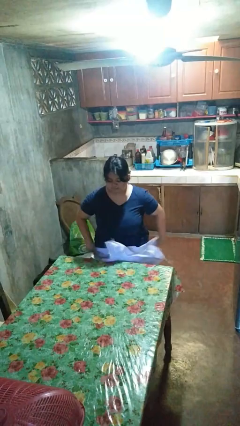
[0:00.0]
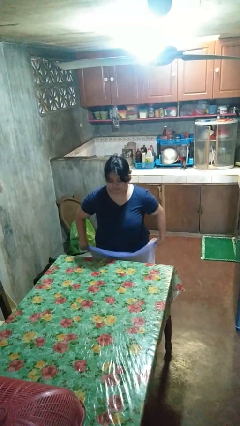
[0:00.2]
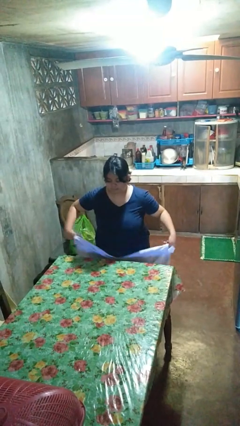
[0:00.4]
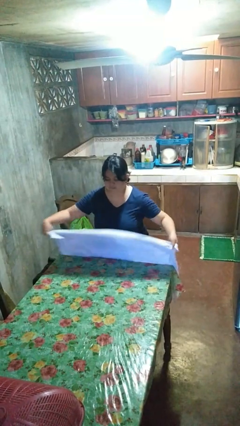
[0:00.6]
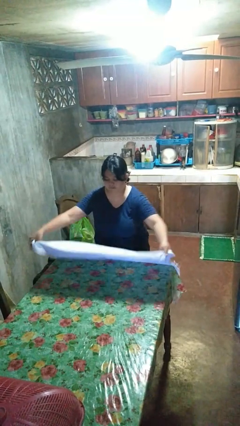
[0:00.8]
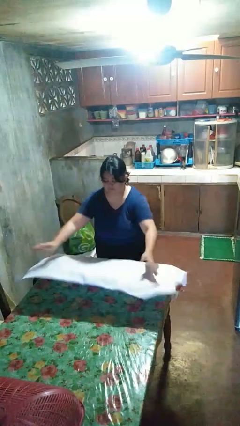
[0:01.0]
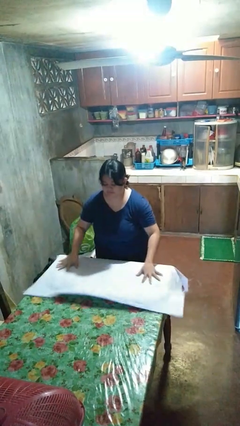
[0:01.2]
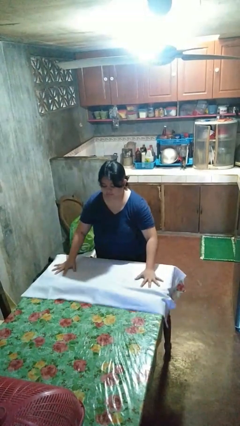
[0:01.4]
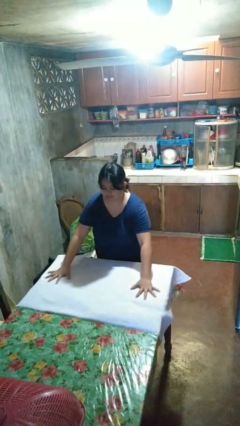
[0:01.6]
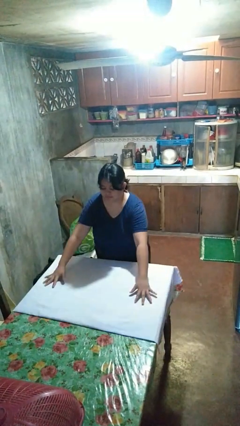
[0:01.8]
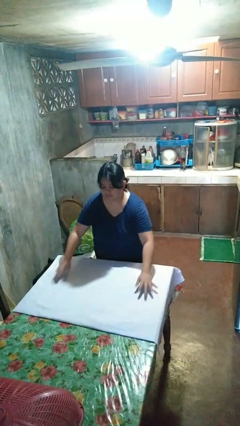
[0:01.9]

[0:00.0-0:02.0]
person spreads tablecloth

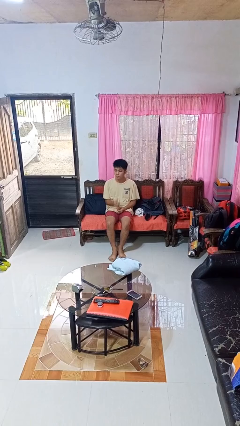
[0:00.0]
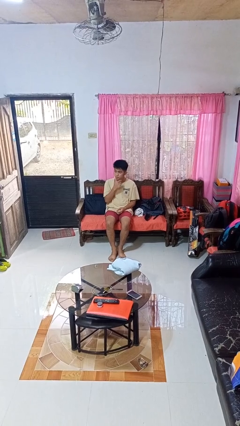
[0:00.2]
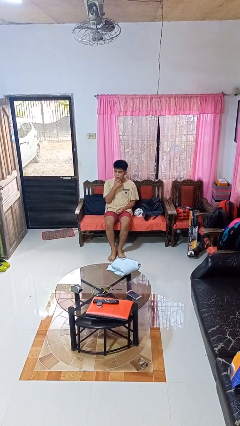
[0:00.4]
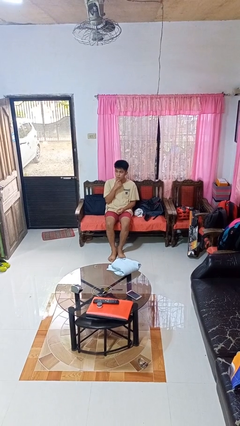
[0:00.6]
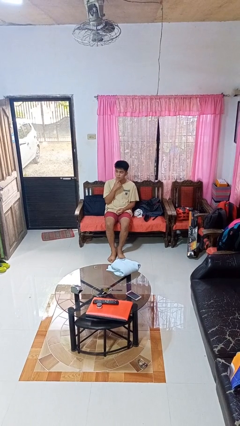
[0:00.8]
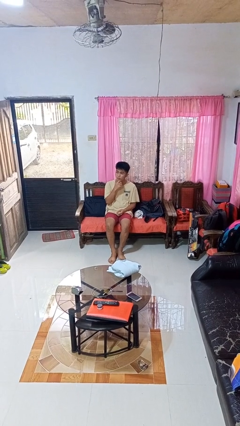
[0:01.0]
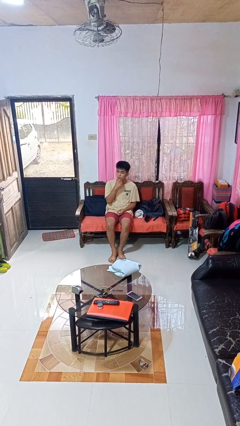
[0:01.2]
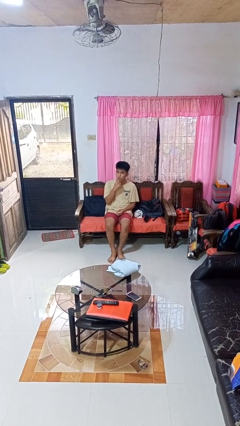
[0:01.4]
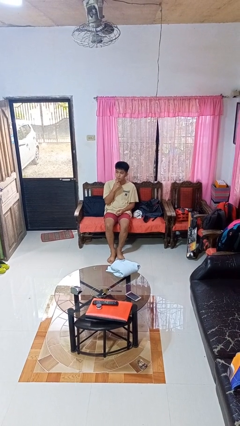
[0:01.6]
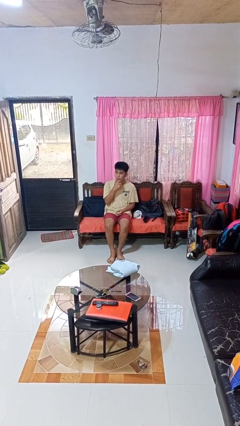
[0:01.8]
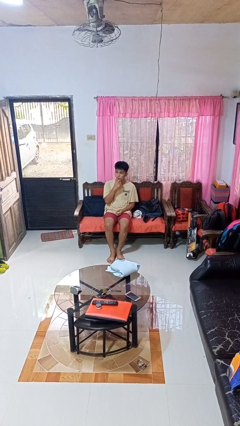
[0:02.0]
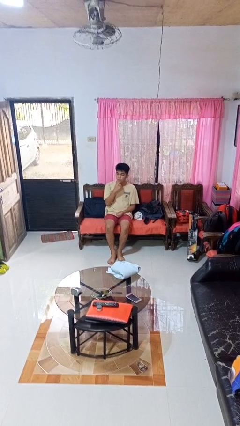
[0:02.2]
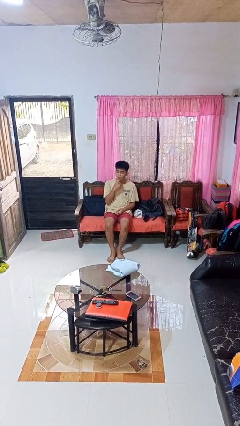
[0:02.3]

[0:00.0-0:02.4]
person strokes chin

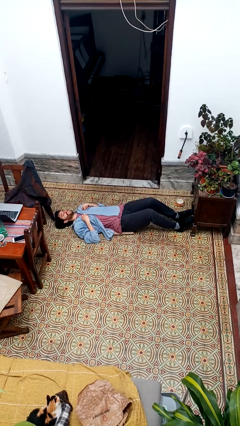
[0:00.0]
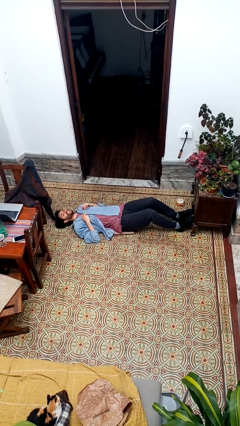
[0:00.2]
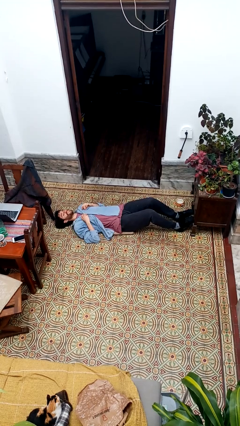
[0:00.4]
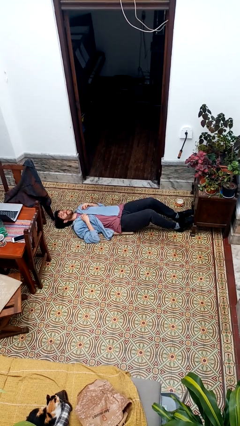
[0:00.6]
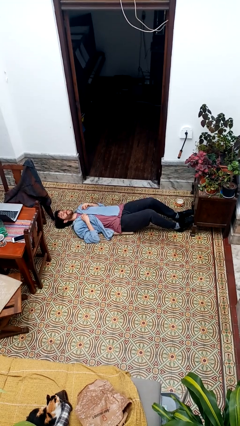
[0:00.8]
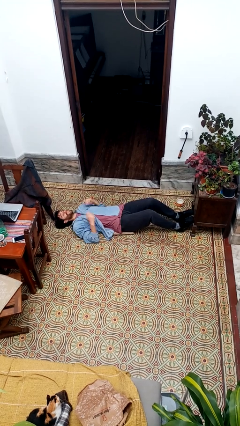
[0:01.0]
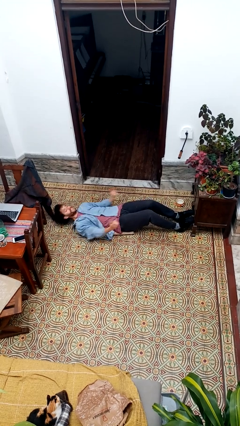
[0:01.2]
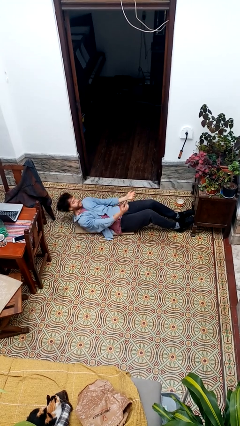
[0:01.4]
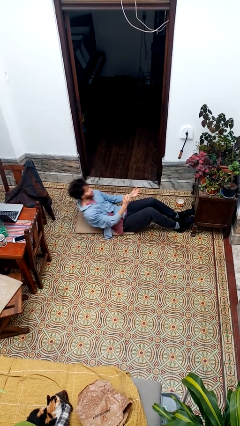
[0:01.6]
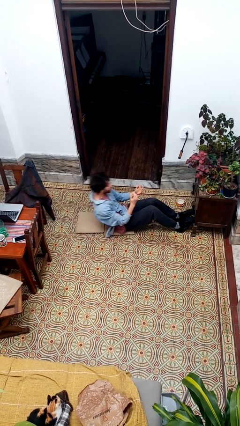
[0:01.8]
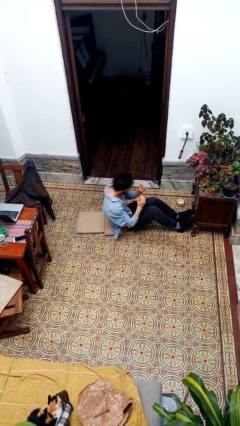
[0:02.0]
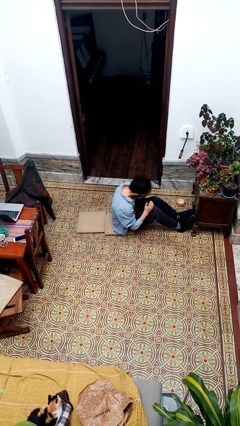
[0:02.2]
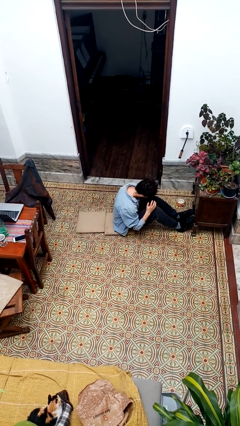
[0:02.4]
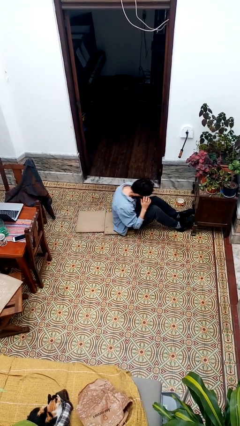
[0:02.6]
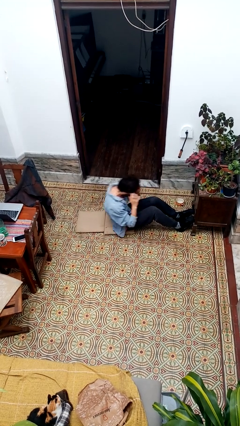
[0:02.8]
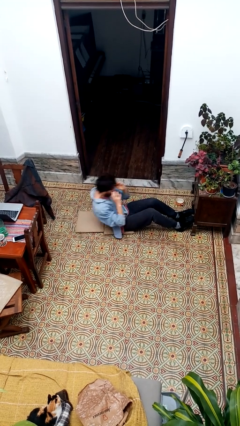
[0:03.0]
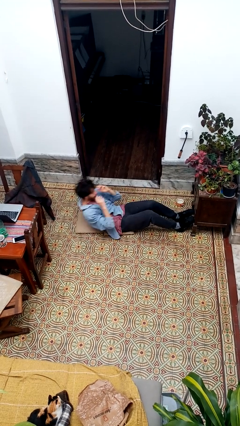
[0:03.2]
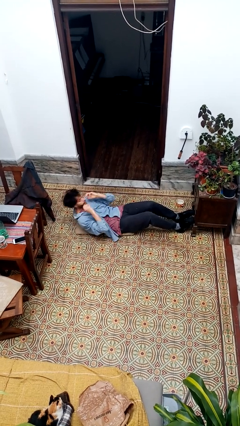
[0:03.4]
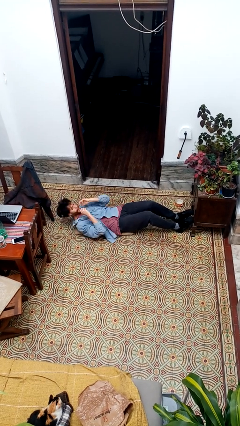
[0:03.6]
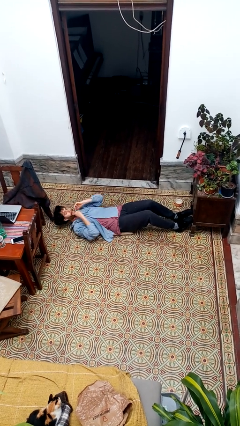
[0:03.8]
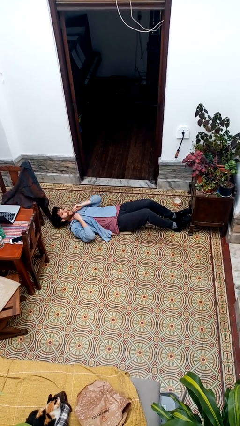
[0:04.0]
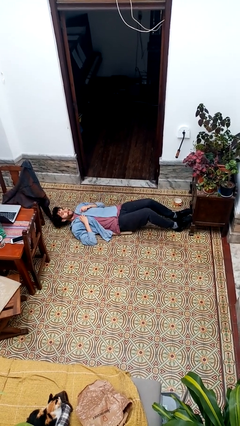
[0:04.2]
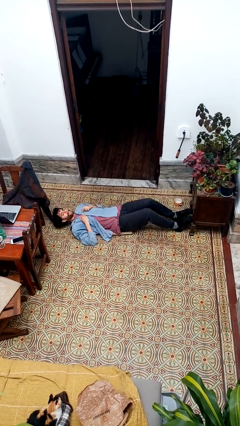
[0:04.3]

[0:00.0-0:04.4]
person exercises with situp

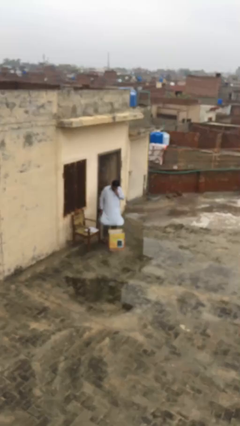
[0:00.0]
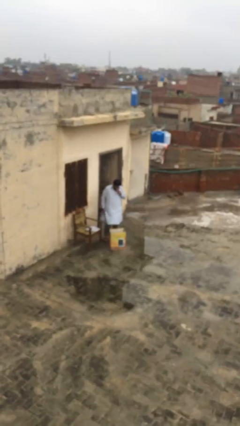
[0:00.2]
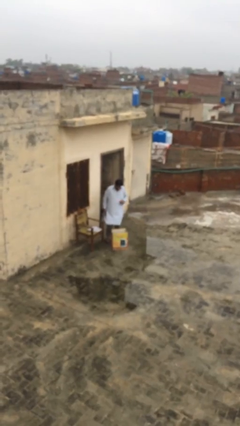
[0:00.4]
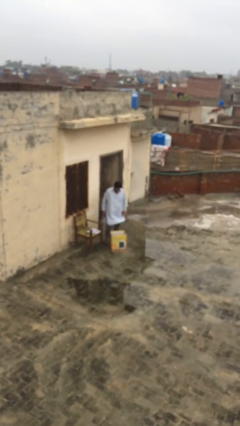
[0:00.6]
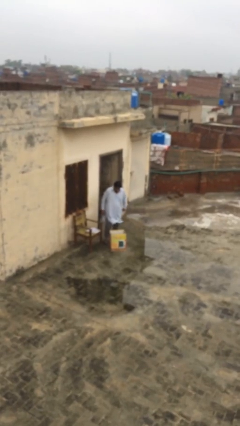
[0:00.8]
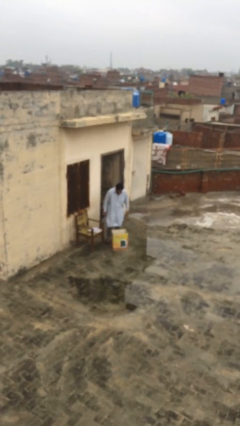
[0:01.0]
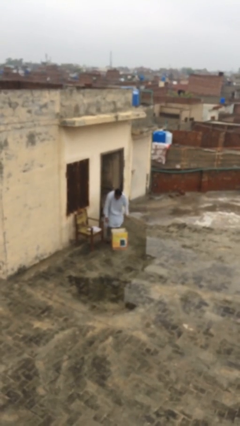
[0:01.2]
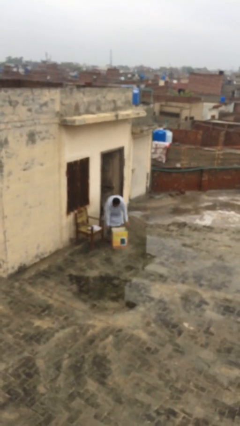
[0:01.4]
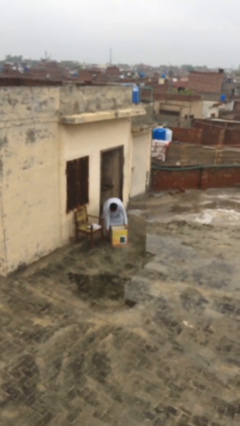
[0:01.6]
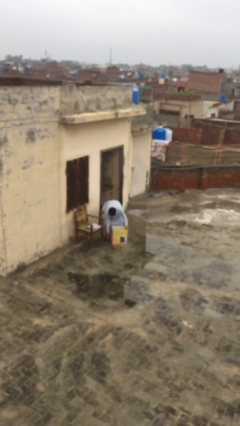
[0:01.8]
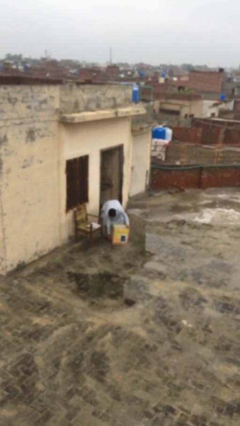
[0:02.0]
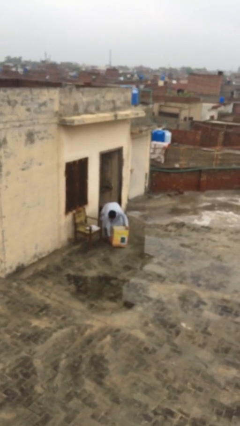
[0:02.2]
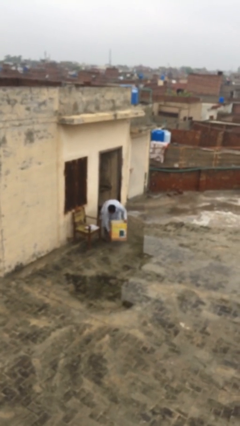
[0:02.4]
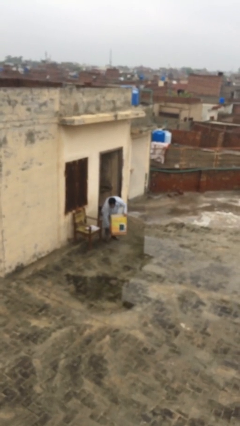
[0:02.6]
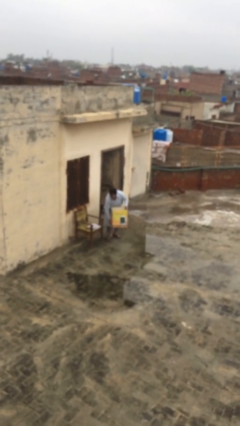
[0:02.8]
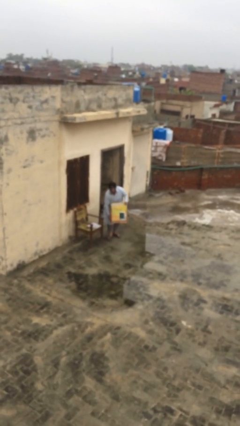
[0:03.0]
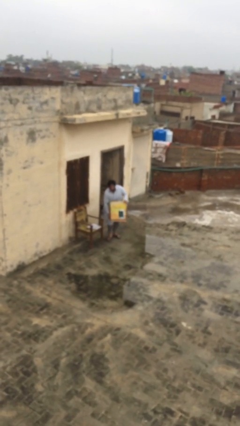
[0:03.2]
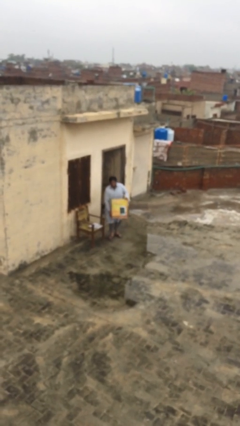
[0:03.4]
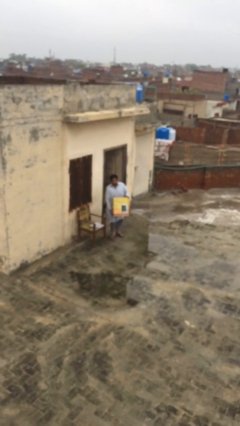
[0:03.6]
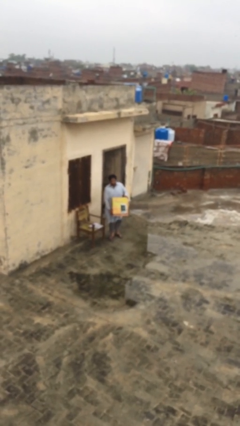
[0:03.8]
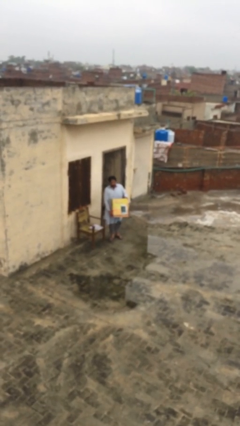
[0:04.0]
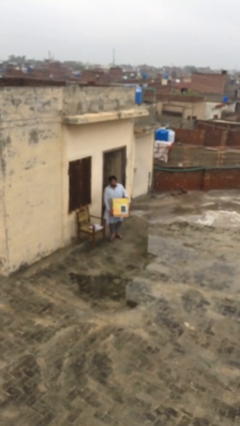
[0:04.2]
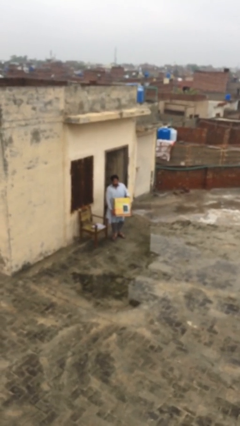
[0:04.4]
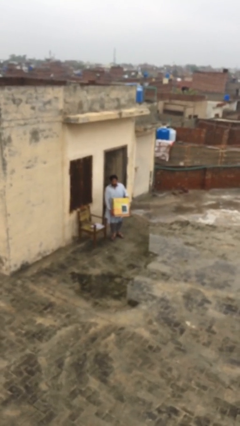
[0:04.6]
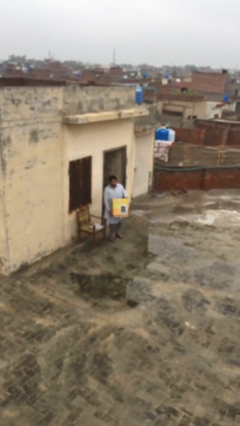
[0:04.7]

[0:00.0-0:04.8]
person picks up object from floor

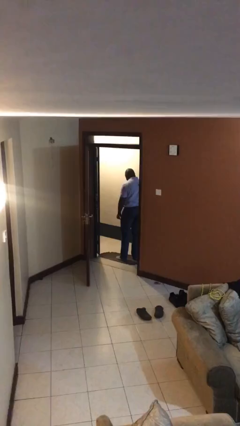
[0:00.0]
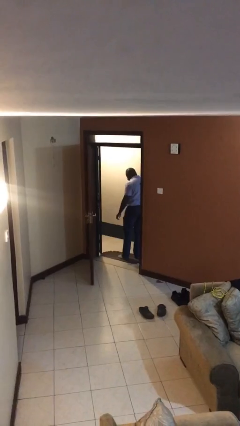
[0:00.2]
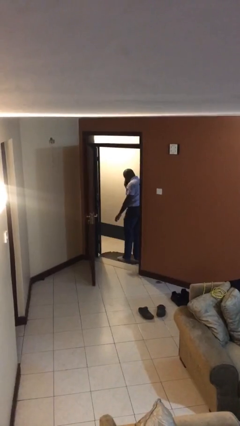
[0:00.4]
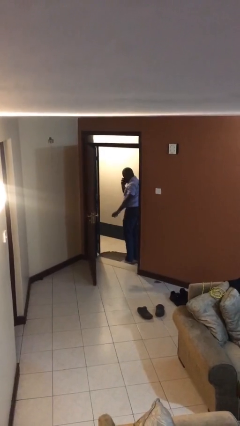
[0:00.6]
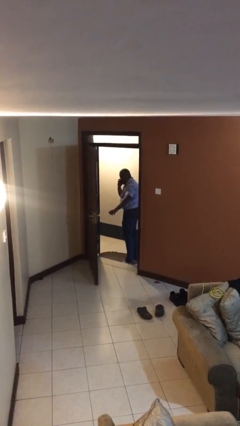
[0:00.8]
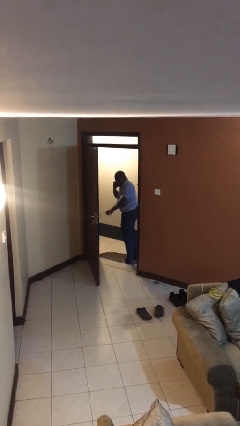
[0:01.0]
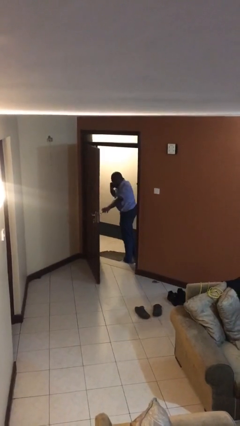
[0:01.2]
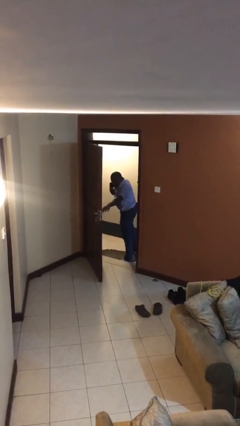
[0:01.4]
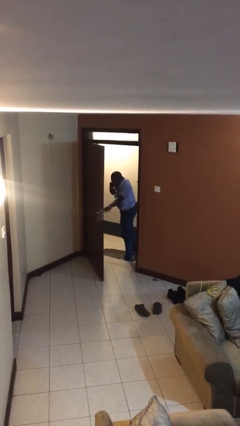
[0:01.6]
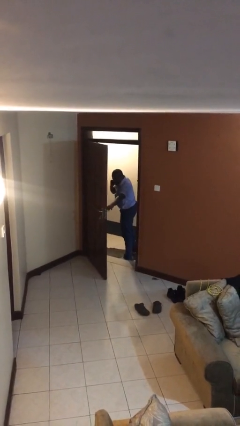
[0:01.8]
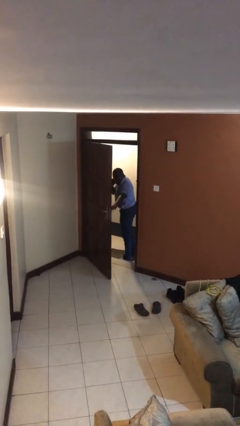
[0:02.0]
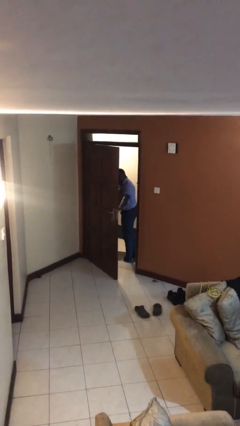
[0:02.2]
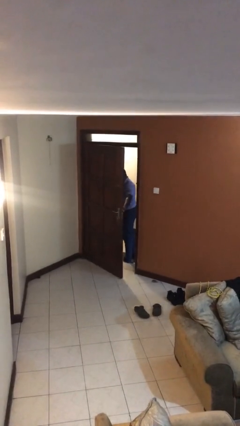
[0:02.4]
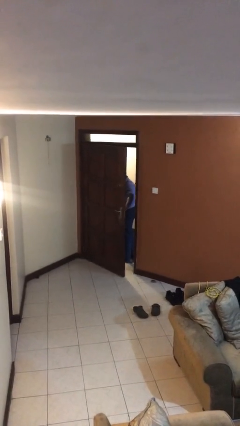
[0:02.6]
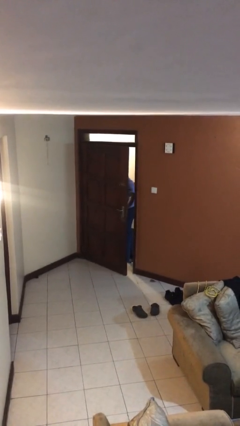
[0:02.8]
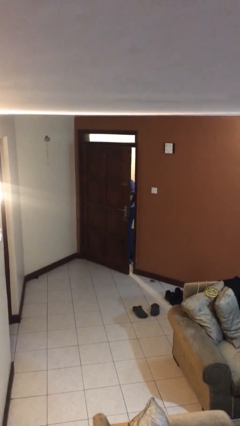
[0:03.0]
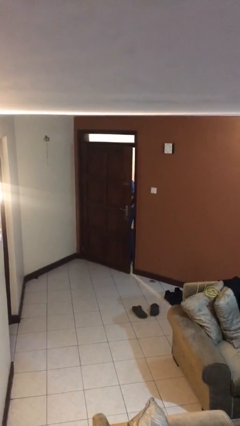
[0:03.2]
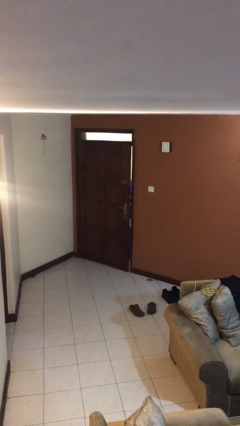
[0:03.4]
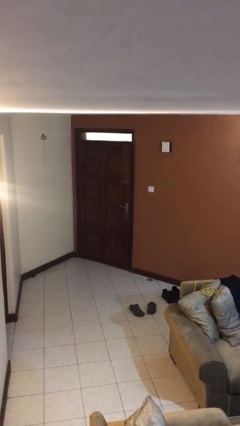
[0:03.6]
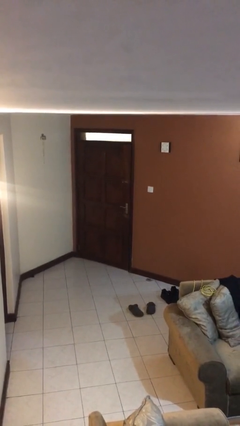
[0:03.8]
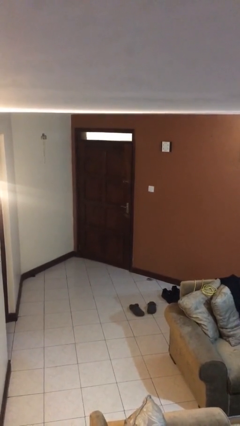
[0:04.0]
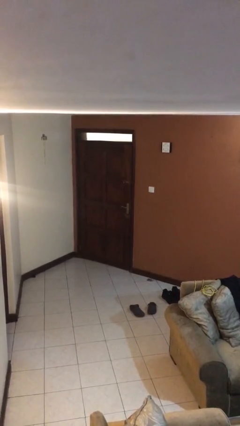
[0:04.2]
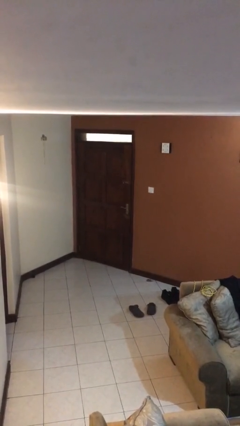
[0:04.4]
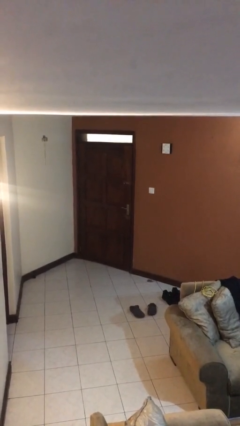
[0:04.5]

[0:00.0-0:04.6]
person closes facility door
